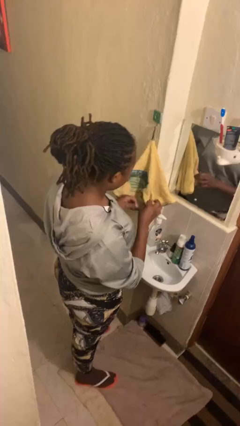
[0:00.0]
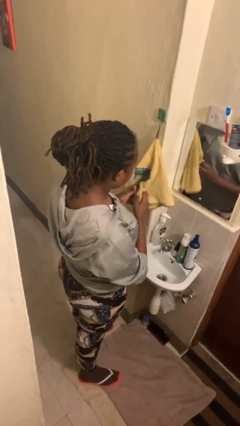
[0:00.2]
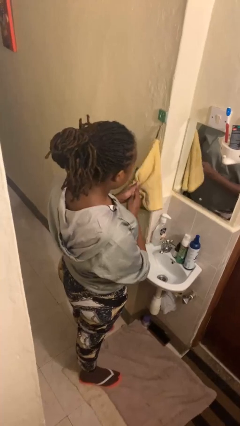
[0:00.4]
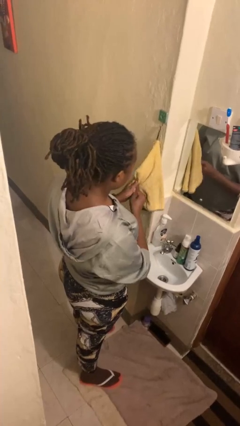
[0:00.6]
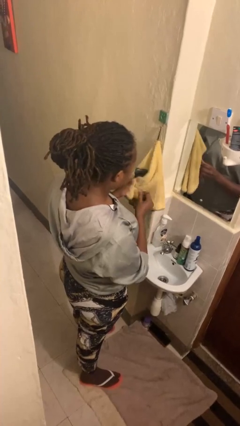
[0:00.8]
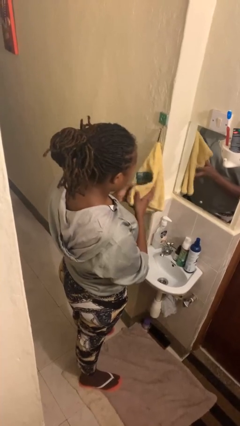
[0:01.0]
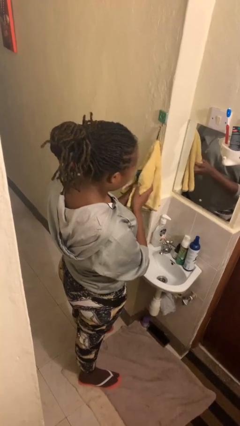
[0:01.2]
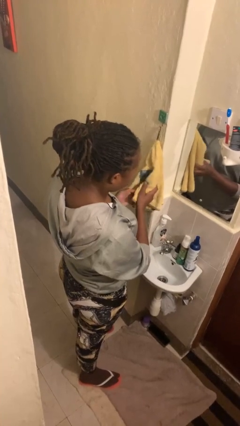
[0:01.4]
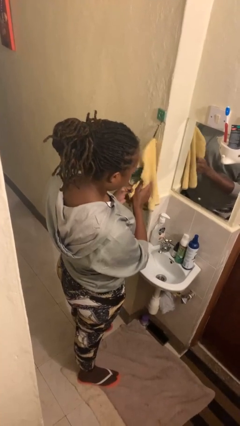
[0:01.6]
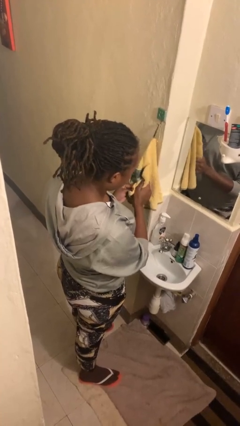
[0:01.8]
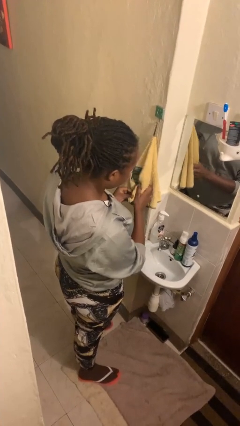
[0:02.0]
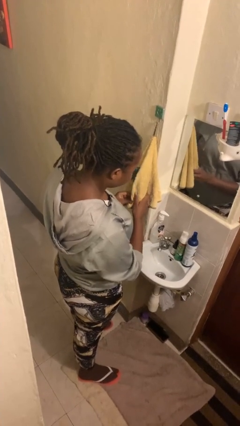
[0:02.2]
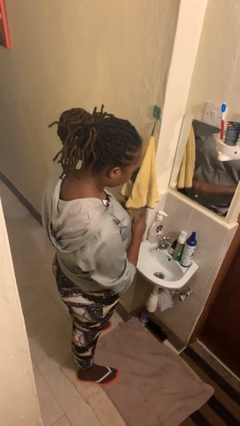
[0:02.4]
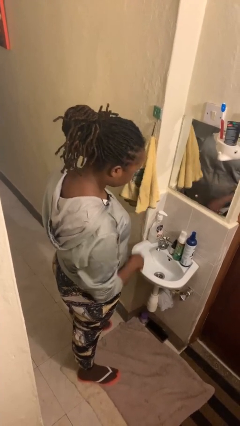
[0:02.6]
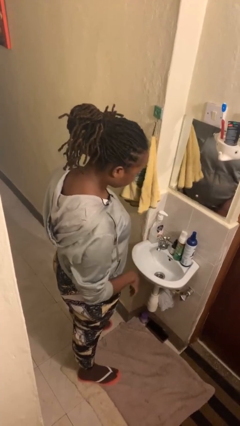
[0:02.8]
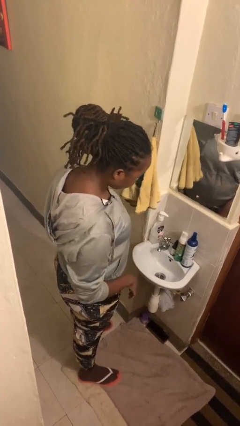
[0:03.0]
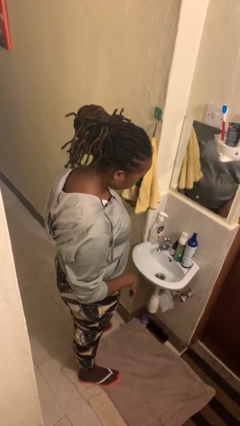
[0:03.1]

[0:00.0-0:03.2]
person dries hands with towel

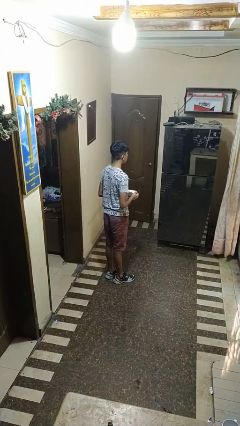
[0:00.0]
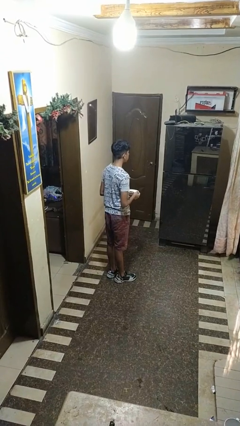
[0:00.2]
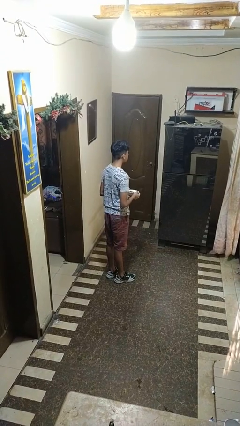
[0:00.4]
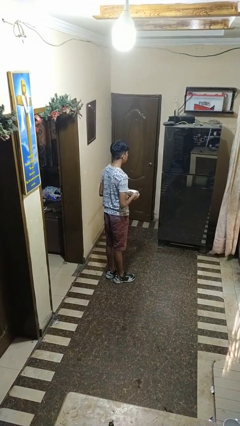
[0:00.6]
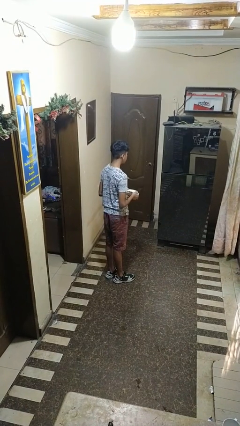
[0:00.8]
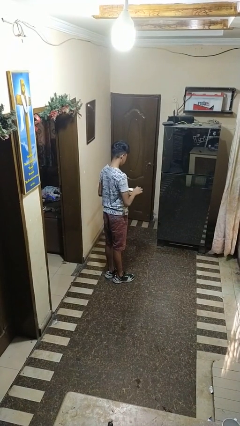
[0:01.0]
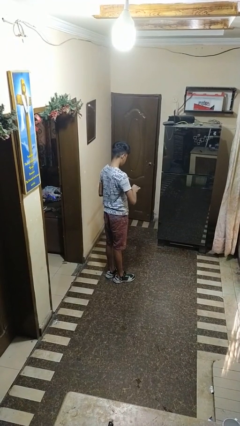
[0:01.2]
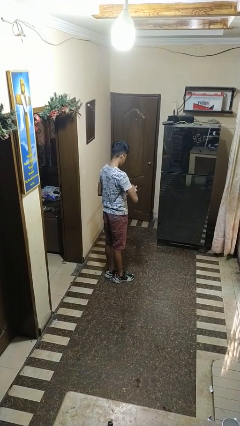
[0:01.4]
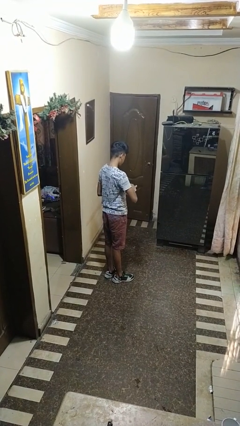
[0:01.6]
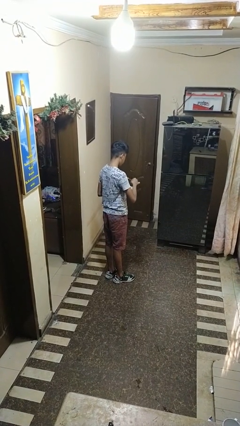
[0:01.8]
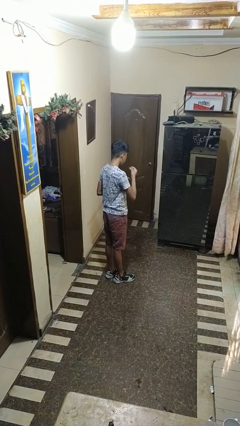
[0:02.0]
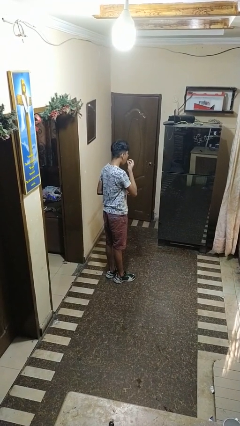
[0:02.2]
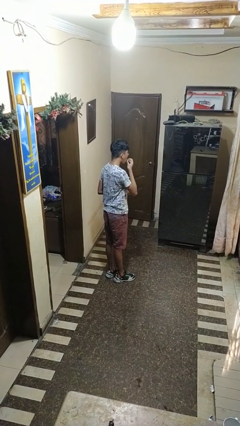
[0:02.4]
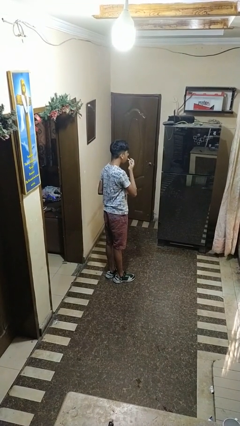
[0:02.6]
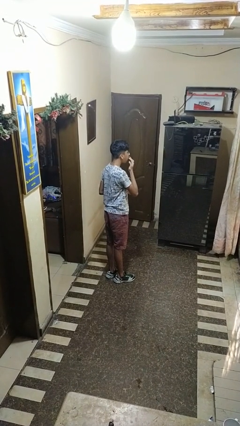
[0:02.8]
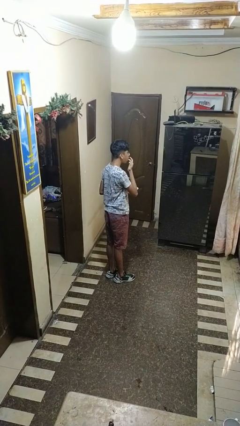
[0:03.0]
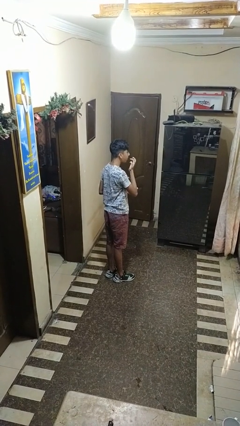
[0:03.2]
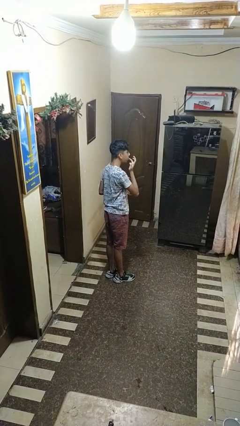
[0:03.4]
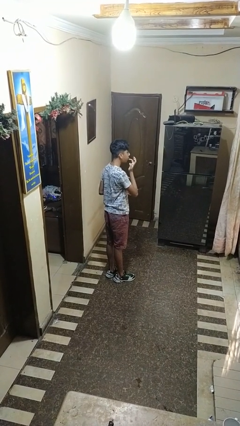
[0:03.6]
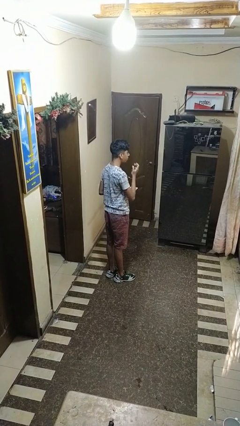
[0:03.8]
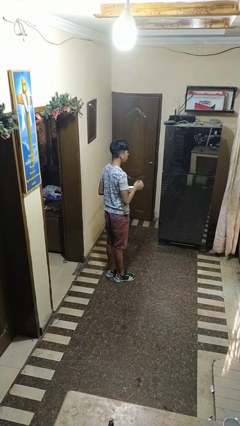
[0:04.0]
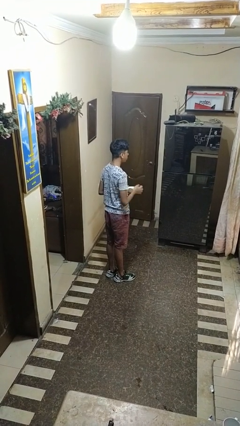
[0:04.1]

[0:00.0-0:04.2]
person licks fingers

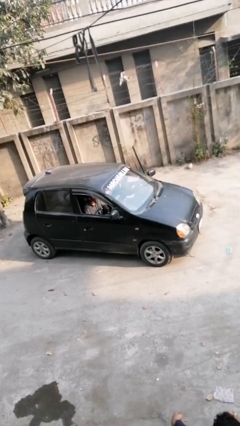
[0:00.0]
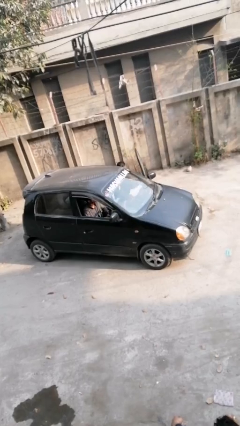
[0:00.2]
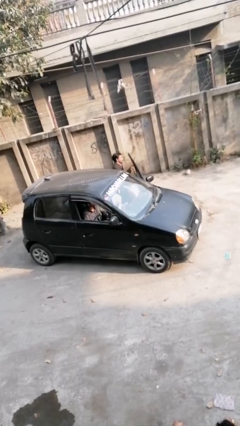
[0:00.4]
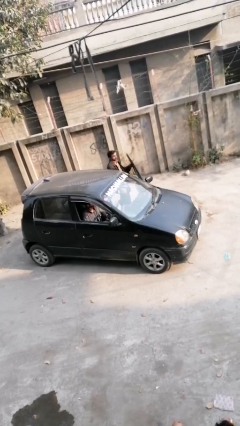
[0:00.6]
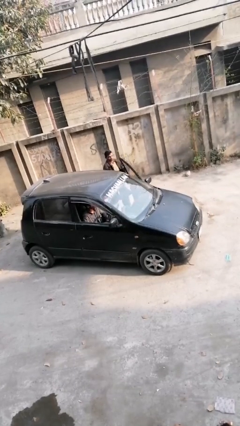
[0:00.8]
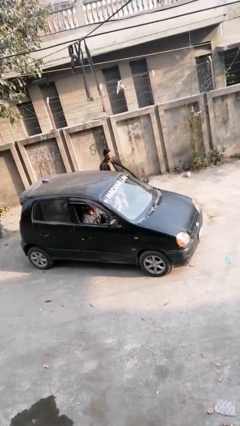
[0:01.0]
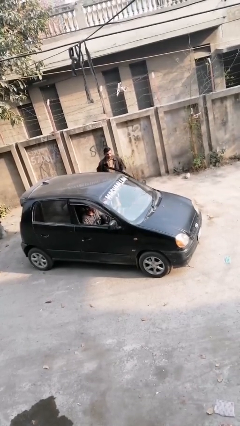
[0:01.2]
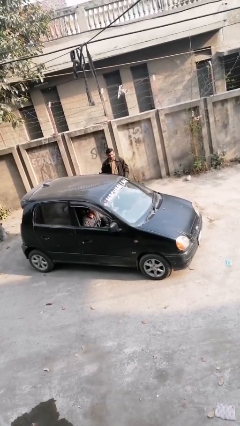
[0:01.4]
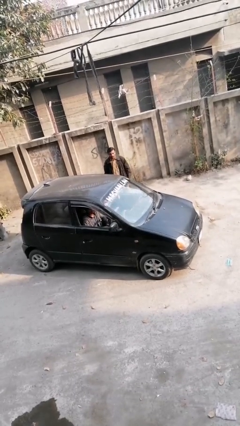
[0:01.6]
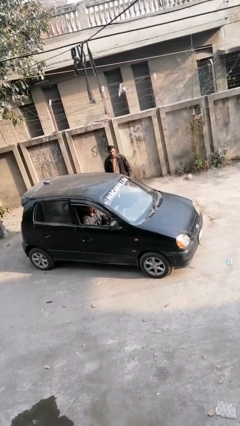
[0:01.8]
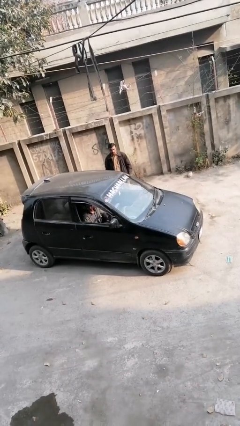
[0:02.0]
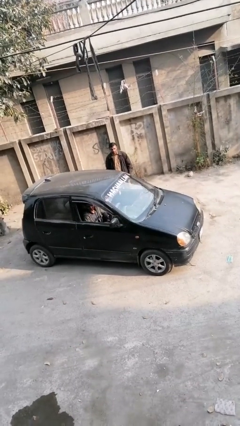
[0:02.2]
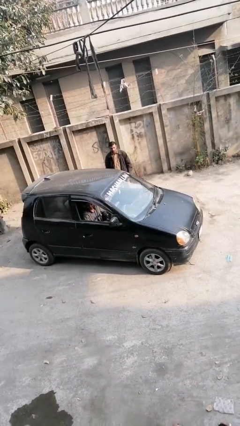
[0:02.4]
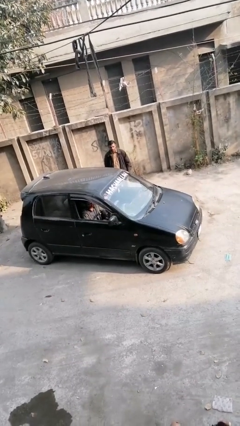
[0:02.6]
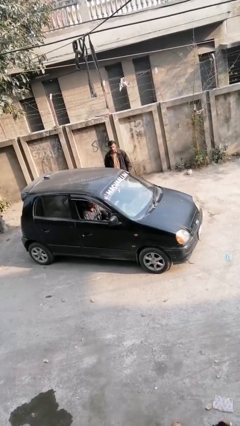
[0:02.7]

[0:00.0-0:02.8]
car drops off person

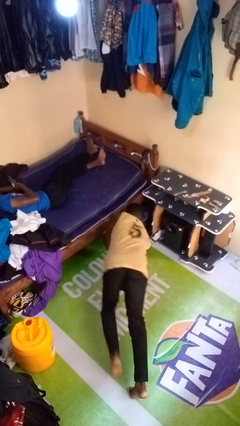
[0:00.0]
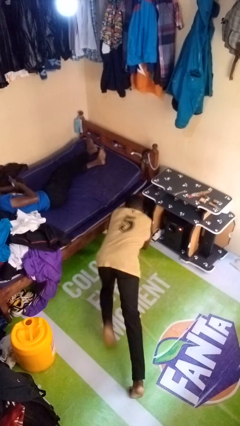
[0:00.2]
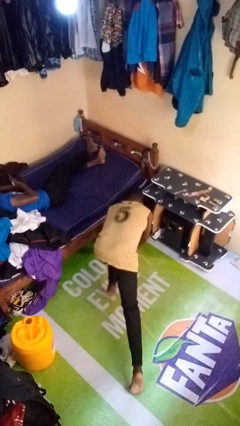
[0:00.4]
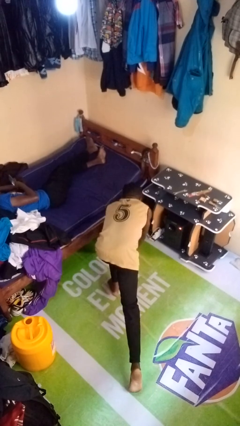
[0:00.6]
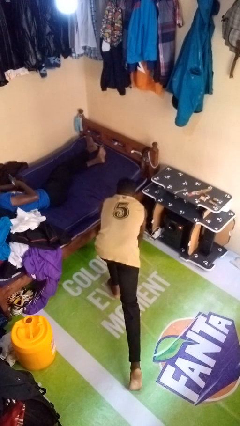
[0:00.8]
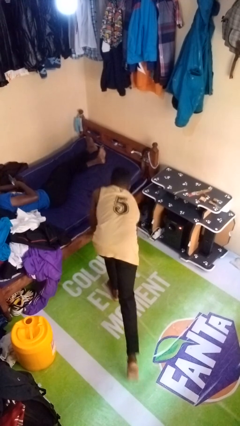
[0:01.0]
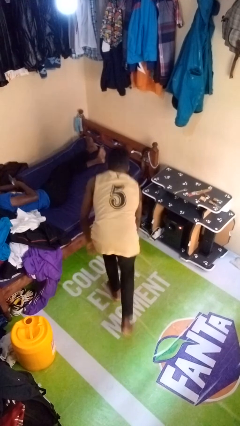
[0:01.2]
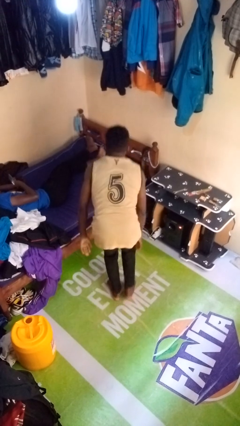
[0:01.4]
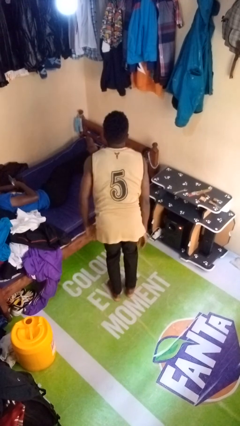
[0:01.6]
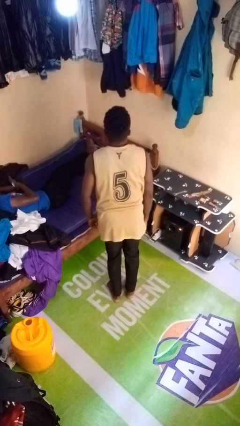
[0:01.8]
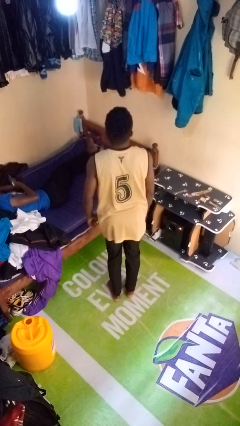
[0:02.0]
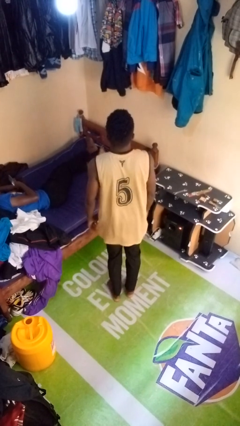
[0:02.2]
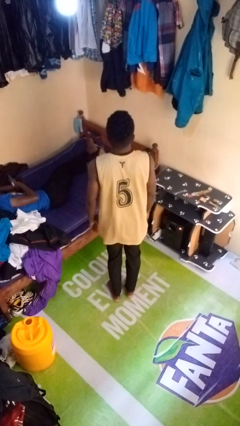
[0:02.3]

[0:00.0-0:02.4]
person stands up from floor

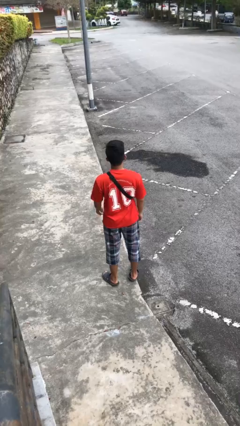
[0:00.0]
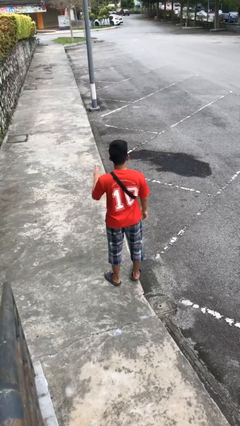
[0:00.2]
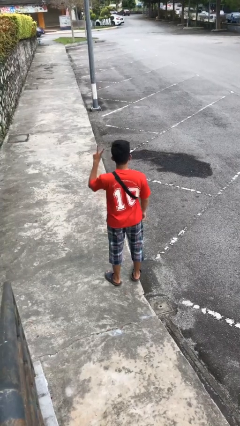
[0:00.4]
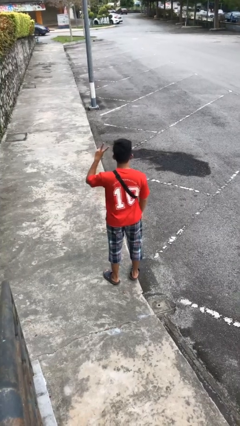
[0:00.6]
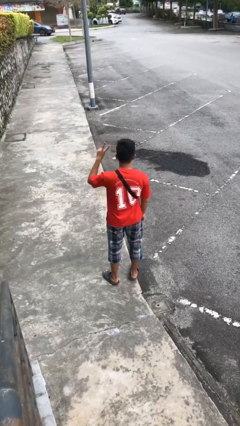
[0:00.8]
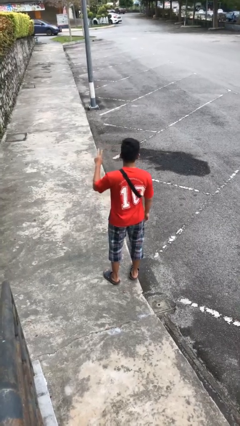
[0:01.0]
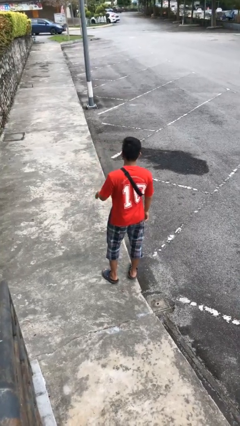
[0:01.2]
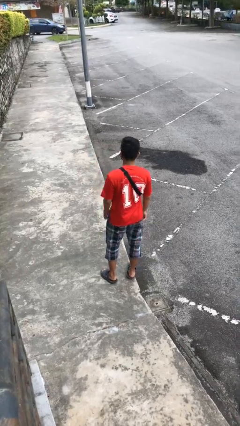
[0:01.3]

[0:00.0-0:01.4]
person gestures peace

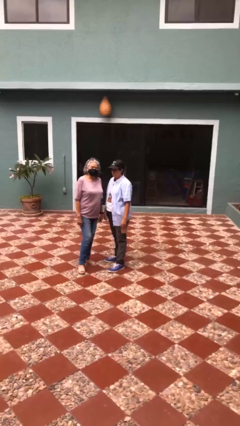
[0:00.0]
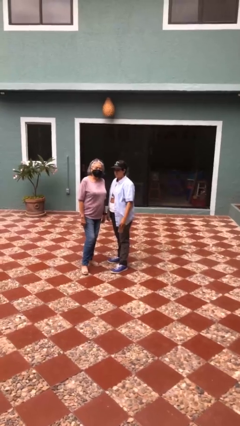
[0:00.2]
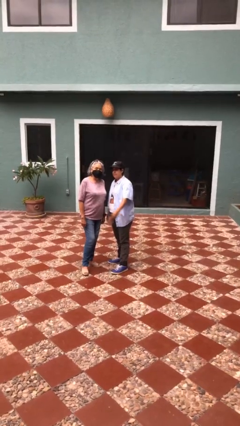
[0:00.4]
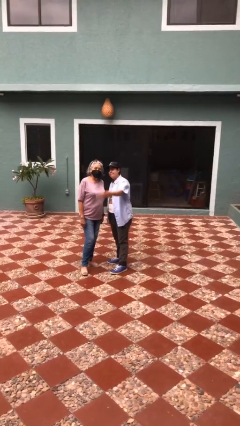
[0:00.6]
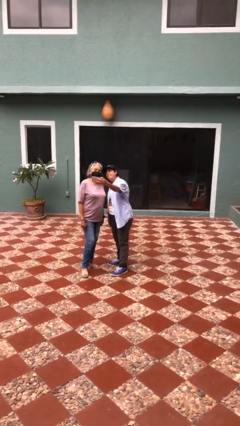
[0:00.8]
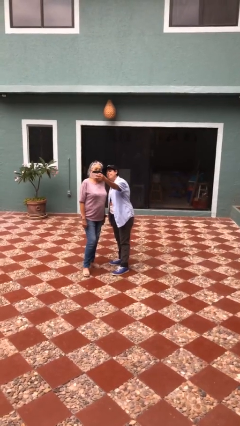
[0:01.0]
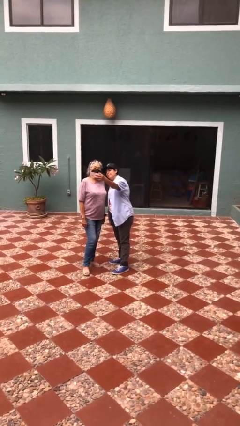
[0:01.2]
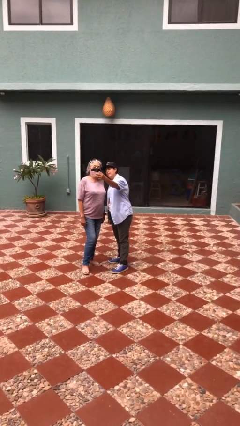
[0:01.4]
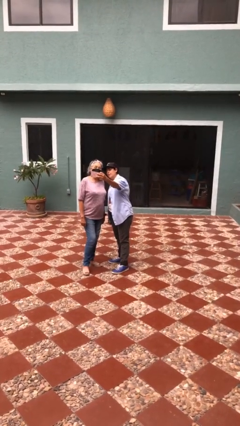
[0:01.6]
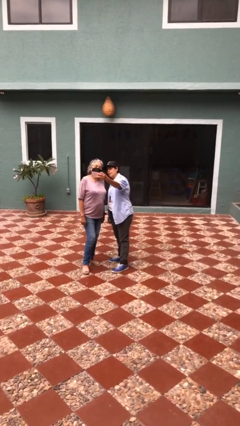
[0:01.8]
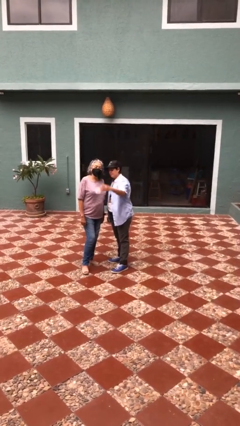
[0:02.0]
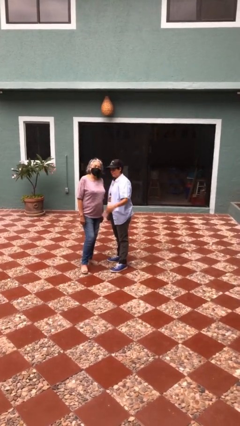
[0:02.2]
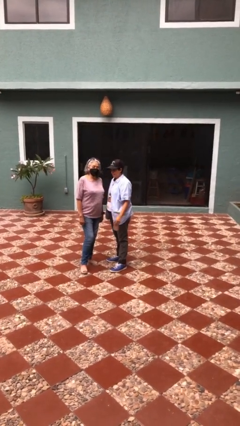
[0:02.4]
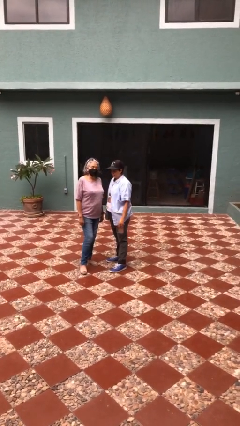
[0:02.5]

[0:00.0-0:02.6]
person takes selfie with person

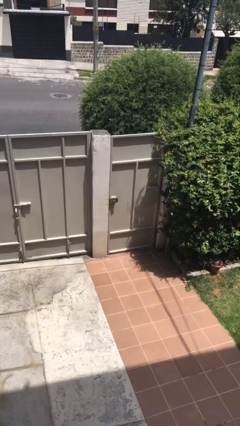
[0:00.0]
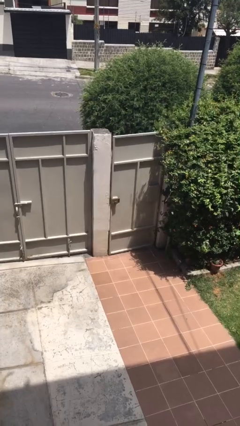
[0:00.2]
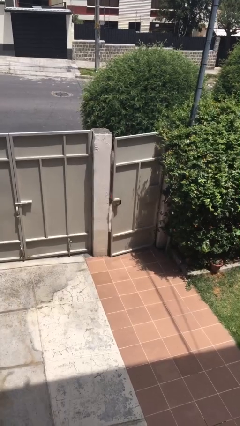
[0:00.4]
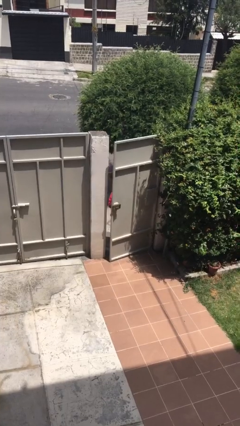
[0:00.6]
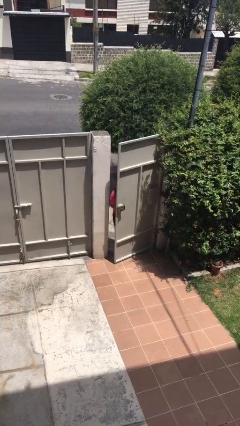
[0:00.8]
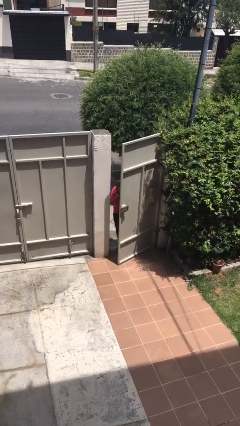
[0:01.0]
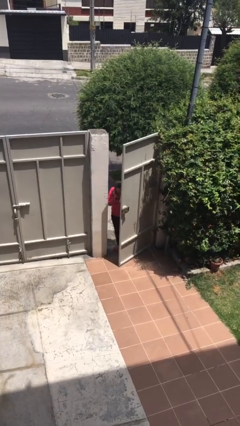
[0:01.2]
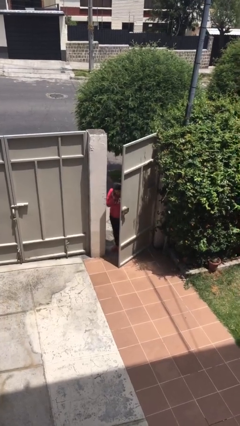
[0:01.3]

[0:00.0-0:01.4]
person opens facility door
